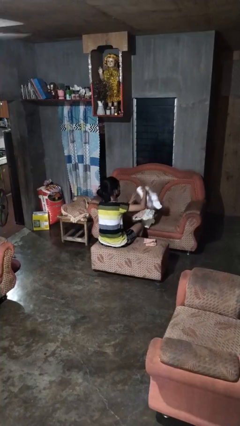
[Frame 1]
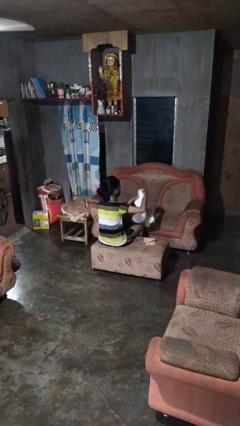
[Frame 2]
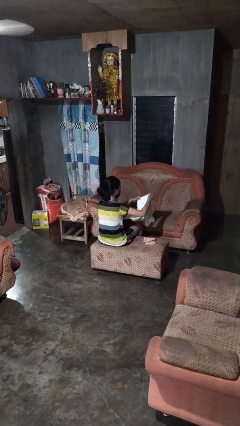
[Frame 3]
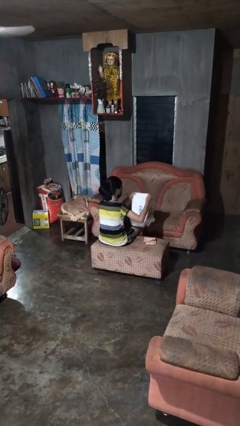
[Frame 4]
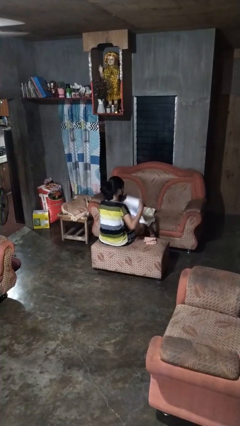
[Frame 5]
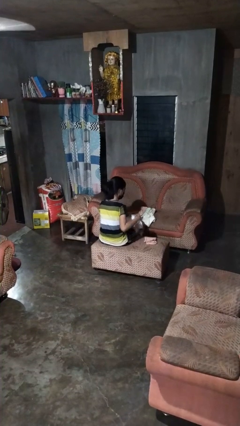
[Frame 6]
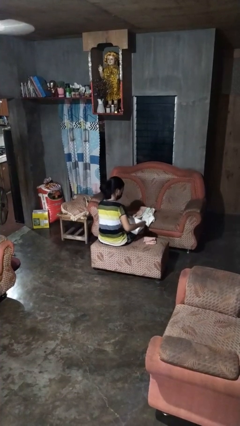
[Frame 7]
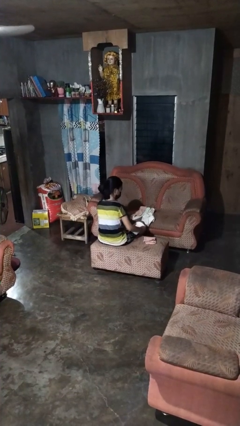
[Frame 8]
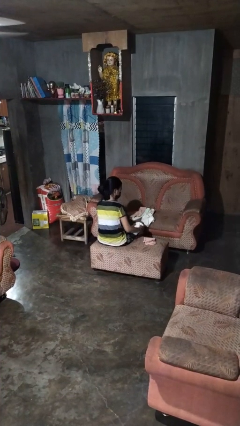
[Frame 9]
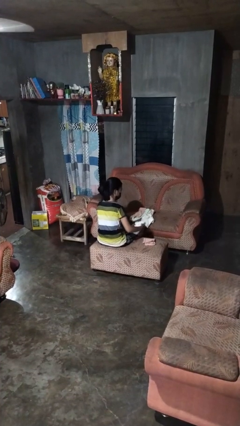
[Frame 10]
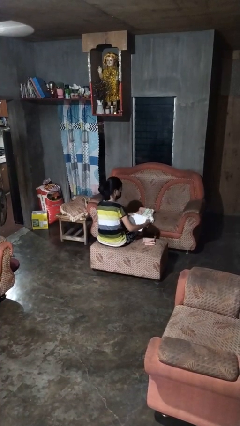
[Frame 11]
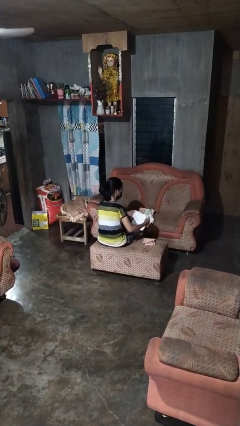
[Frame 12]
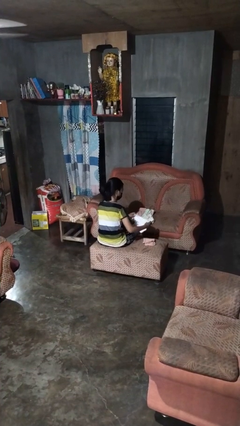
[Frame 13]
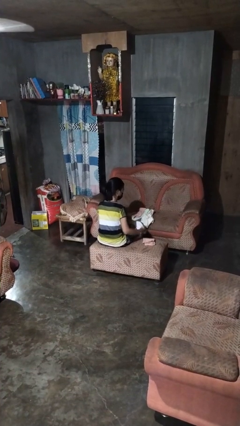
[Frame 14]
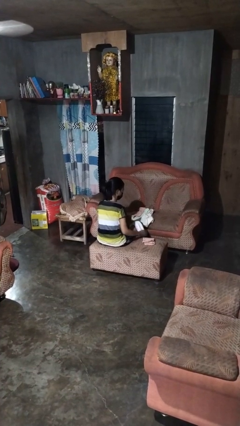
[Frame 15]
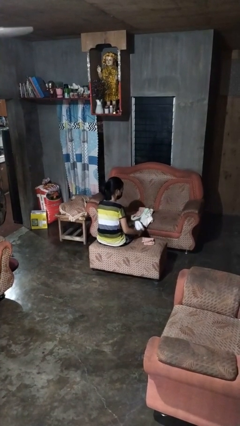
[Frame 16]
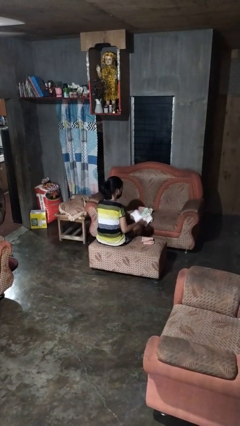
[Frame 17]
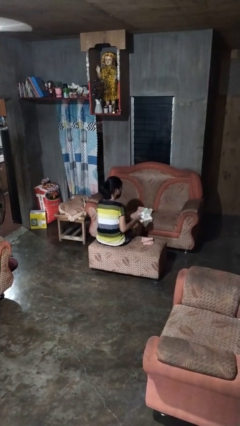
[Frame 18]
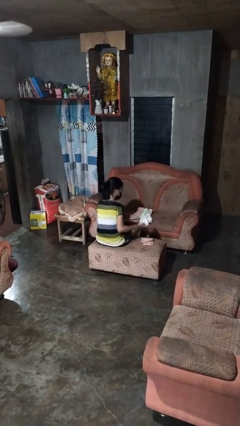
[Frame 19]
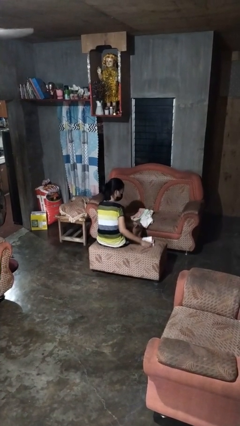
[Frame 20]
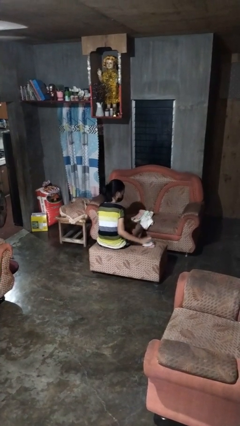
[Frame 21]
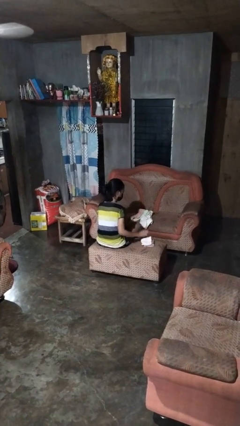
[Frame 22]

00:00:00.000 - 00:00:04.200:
person folds towel

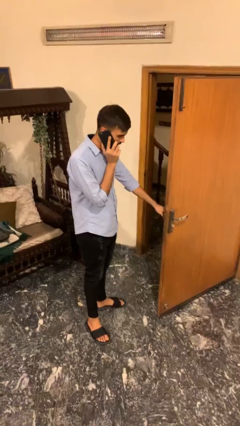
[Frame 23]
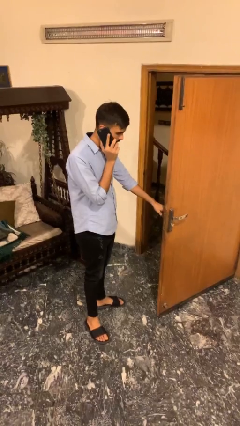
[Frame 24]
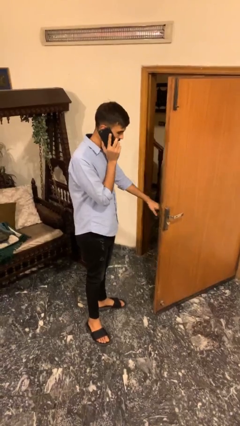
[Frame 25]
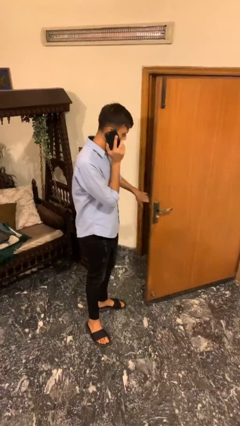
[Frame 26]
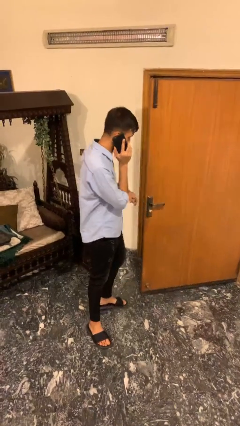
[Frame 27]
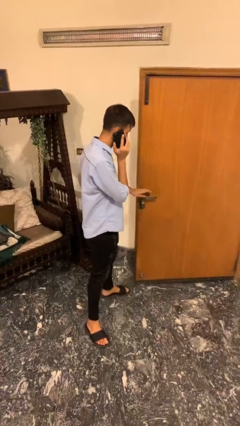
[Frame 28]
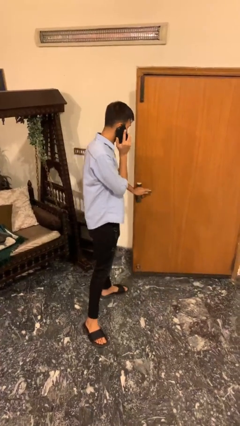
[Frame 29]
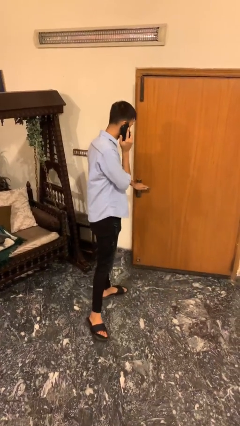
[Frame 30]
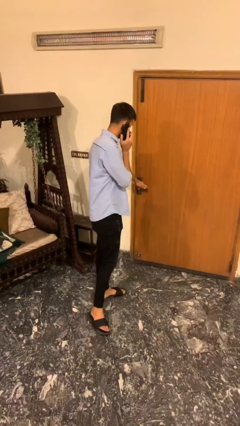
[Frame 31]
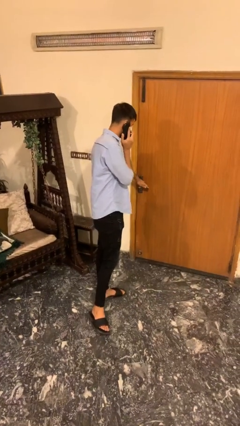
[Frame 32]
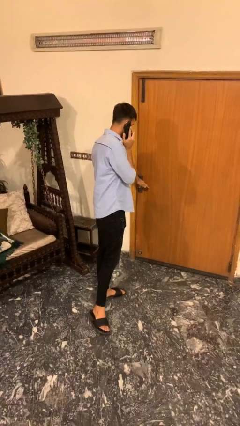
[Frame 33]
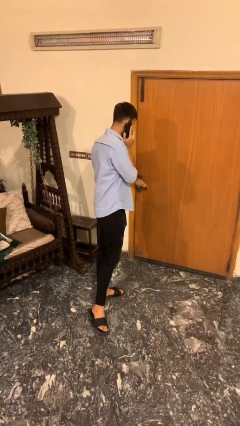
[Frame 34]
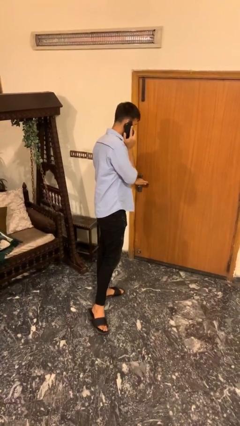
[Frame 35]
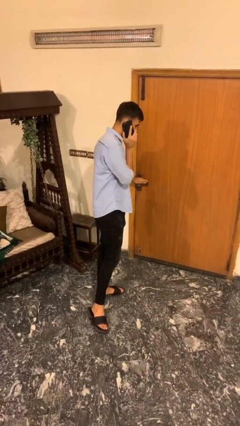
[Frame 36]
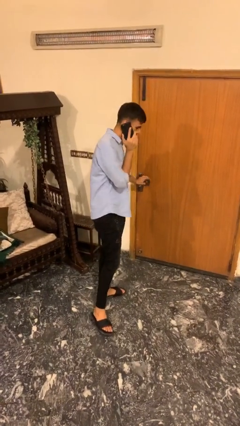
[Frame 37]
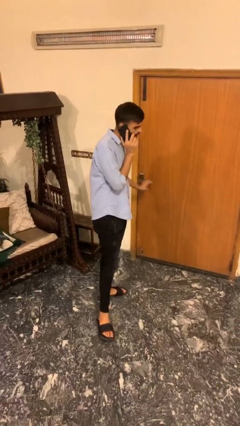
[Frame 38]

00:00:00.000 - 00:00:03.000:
person closes facility door

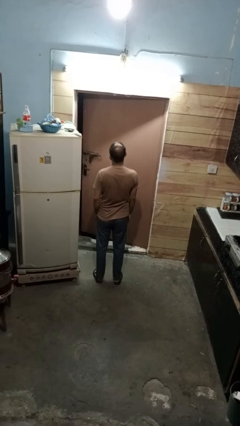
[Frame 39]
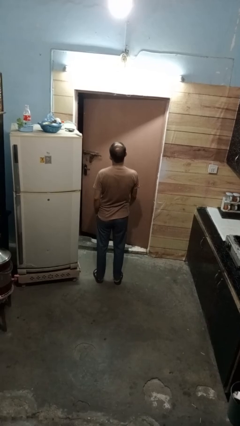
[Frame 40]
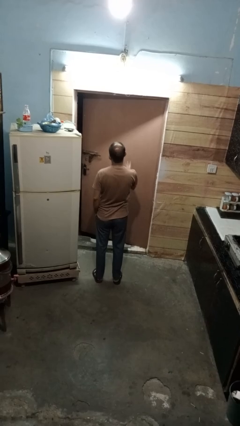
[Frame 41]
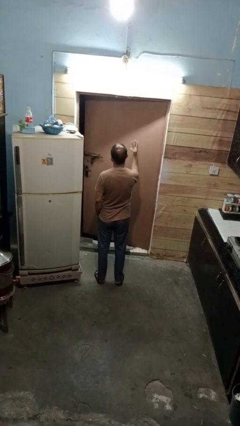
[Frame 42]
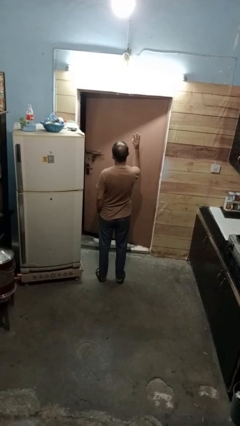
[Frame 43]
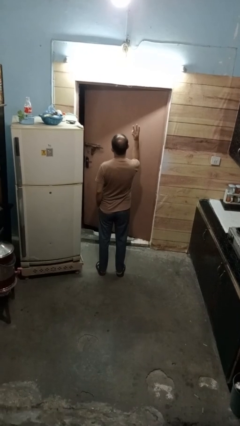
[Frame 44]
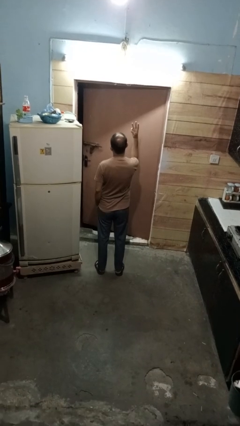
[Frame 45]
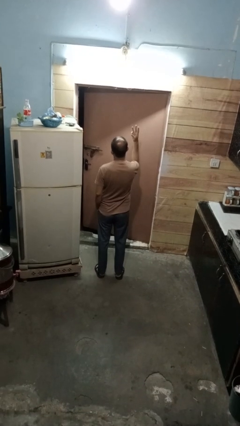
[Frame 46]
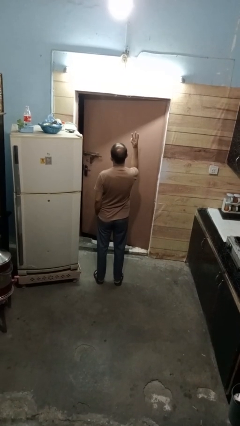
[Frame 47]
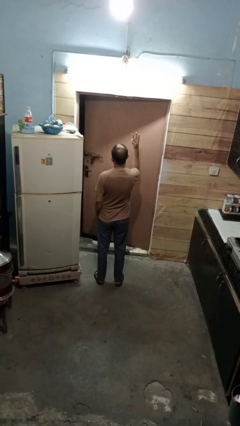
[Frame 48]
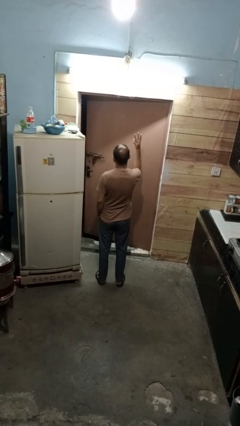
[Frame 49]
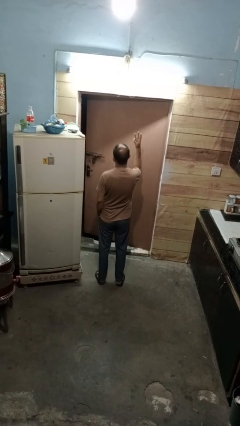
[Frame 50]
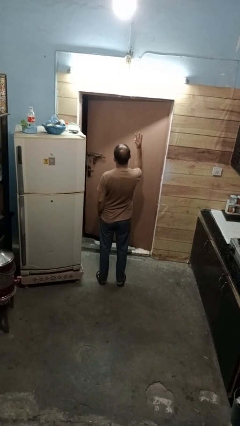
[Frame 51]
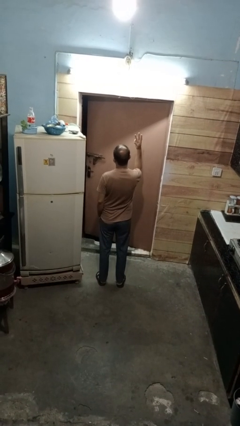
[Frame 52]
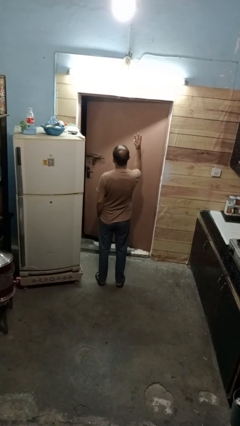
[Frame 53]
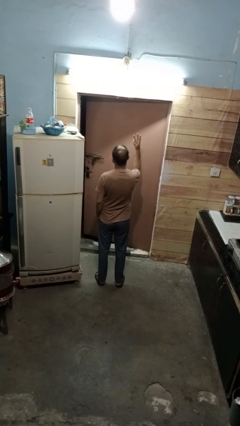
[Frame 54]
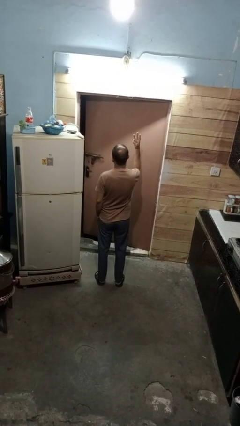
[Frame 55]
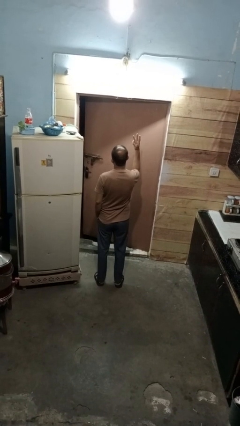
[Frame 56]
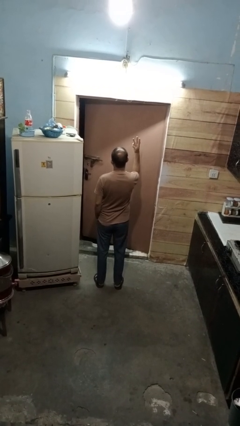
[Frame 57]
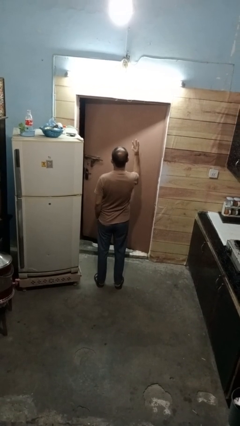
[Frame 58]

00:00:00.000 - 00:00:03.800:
person gestures number three

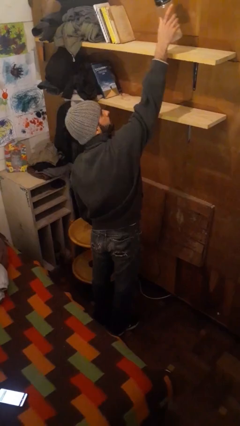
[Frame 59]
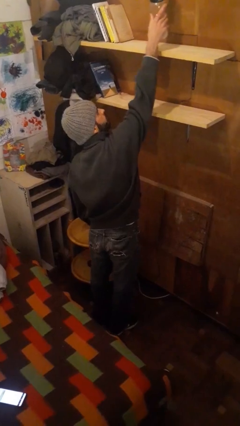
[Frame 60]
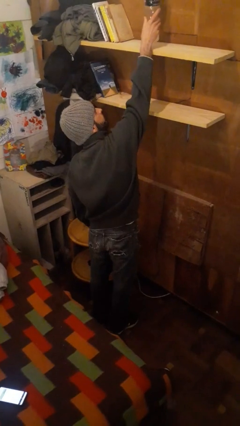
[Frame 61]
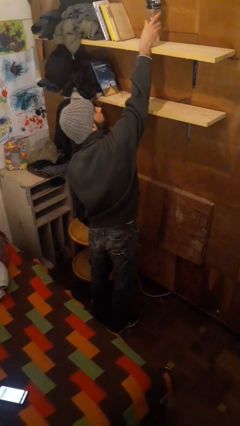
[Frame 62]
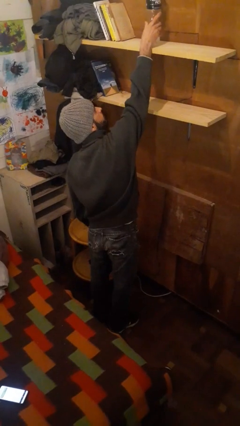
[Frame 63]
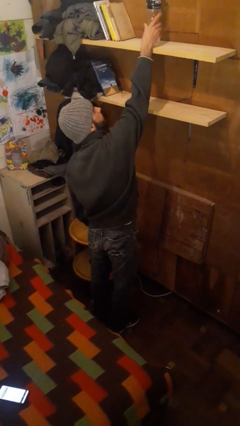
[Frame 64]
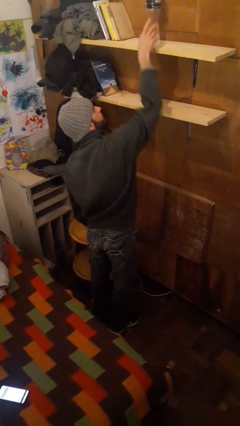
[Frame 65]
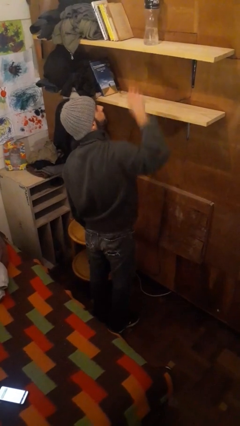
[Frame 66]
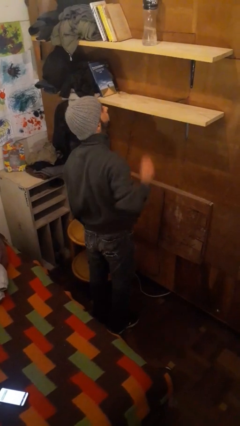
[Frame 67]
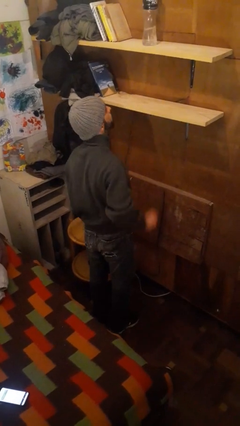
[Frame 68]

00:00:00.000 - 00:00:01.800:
person puts down object on shelf

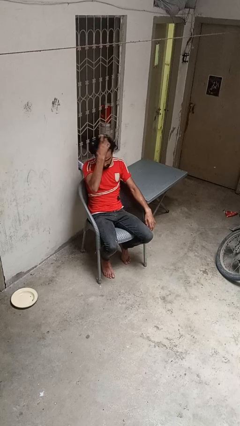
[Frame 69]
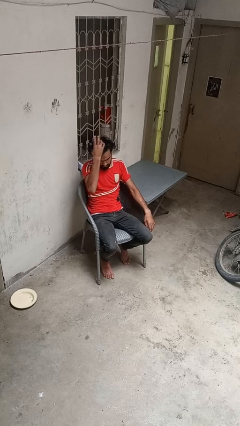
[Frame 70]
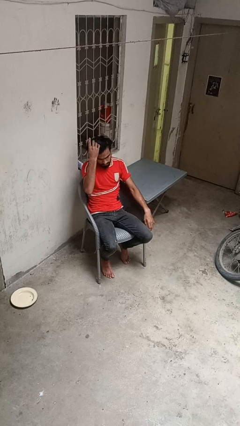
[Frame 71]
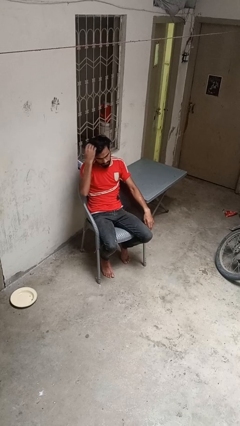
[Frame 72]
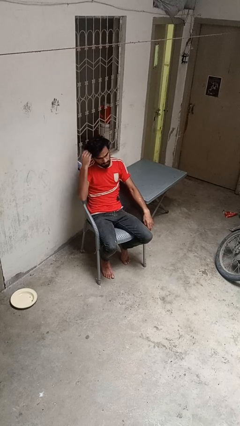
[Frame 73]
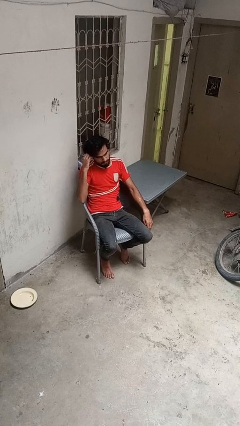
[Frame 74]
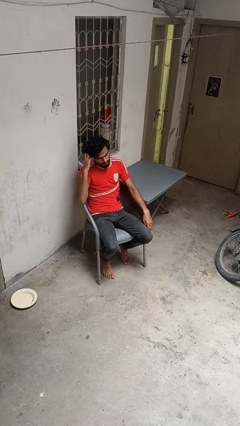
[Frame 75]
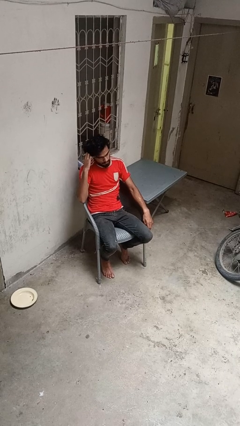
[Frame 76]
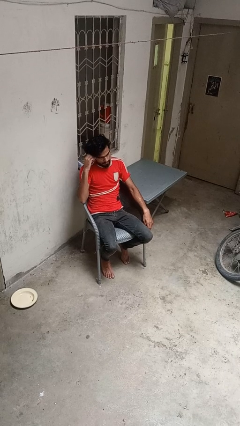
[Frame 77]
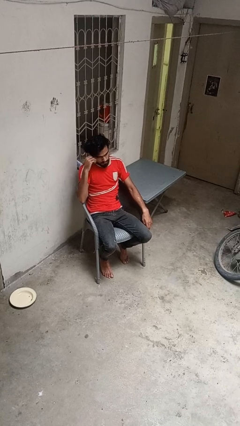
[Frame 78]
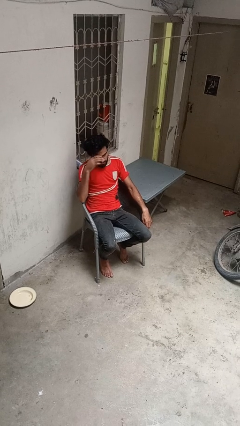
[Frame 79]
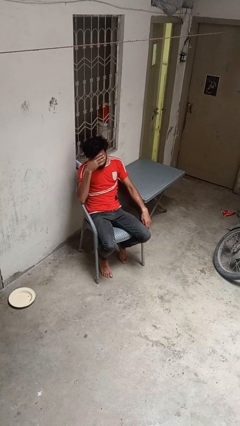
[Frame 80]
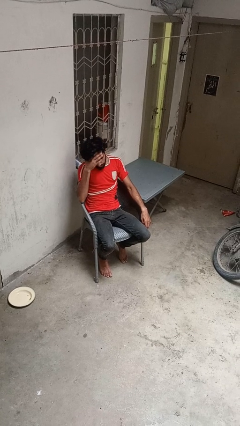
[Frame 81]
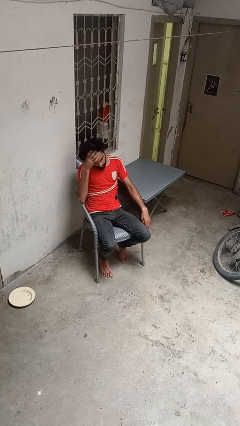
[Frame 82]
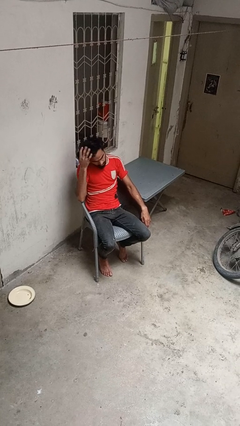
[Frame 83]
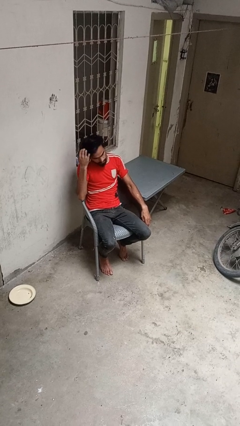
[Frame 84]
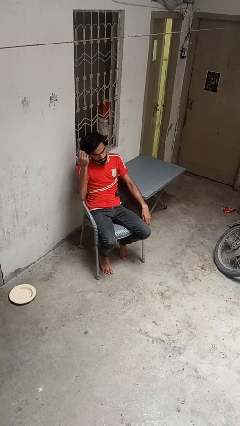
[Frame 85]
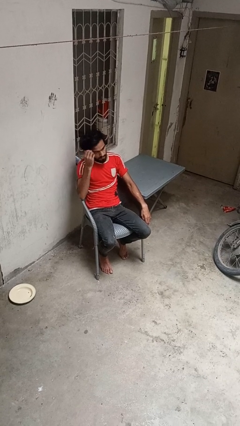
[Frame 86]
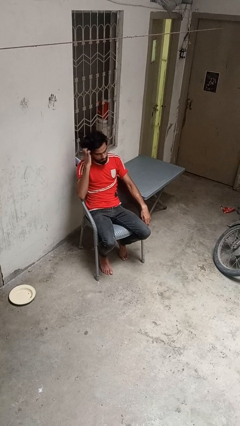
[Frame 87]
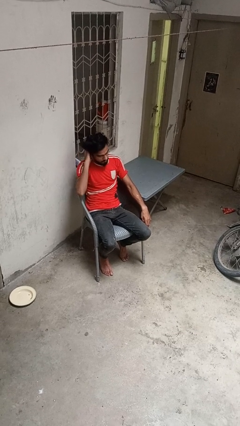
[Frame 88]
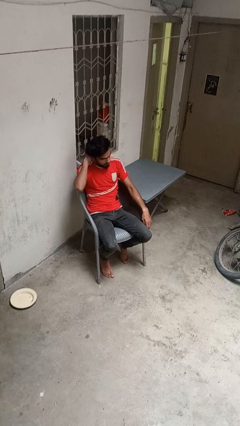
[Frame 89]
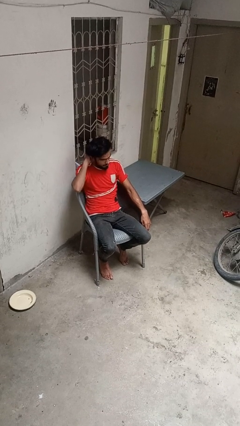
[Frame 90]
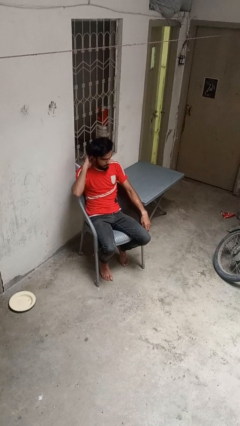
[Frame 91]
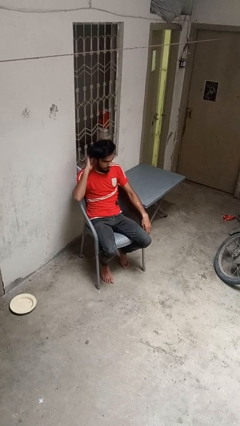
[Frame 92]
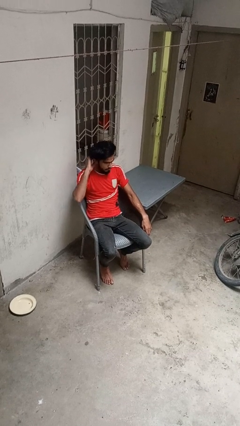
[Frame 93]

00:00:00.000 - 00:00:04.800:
person strokes hair

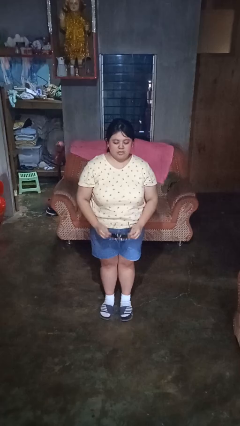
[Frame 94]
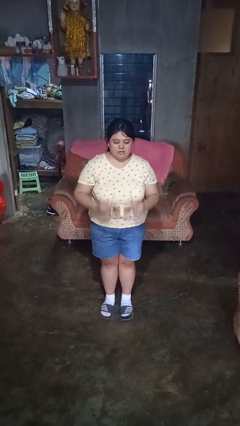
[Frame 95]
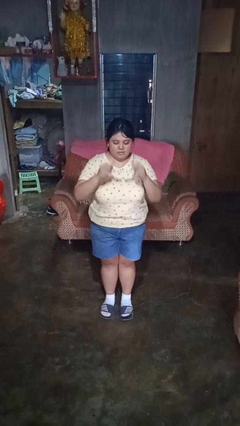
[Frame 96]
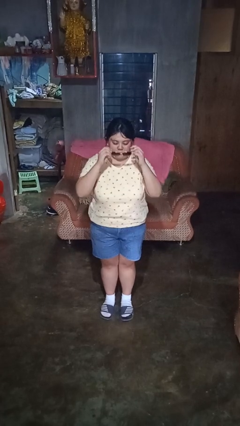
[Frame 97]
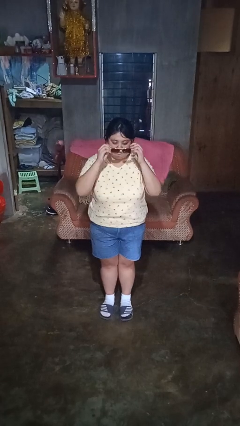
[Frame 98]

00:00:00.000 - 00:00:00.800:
person puts on sunglasses
